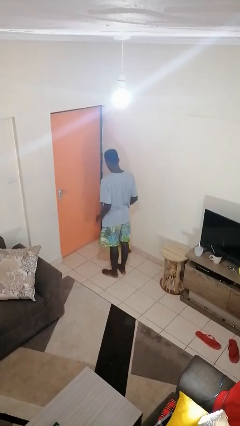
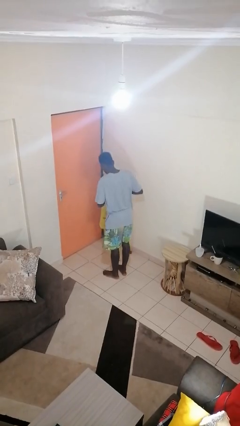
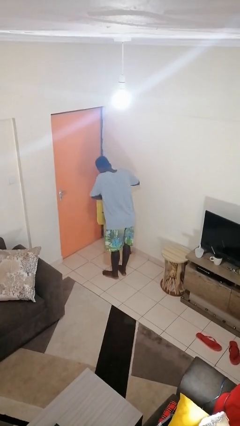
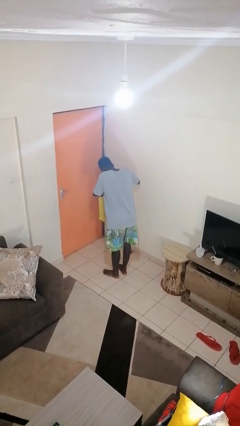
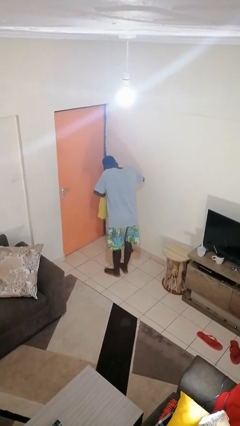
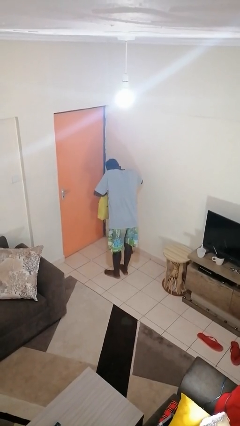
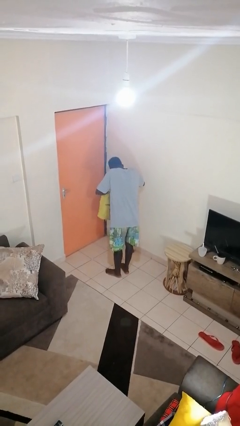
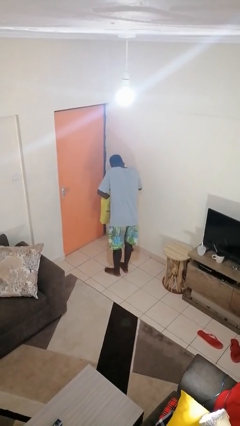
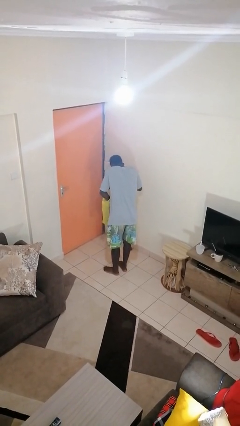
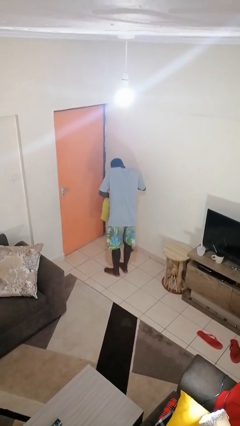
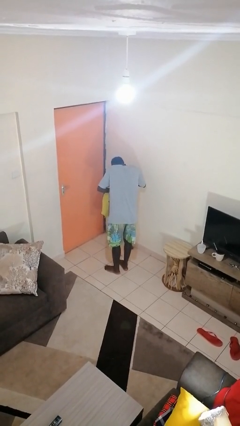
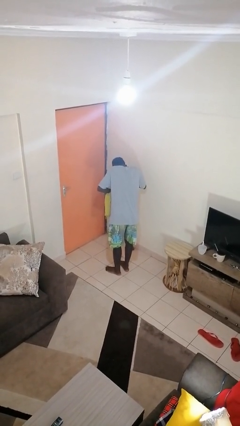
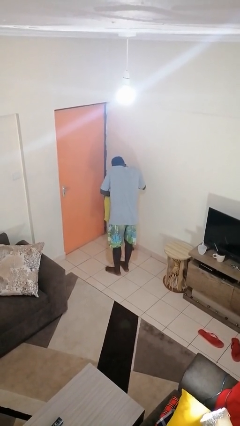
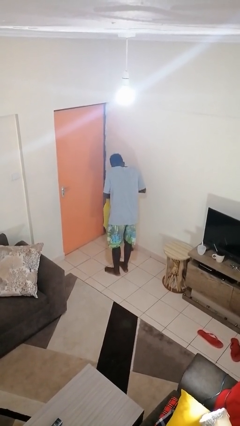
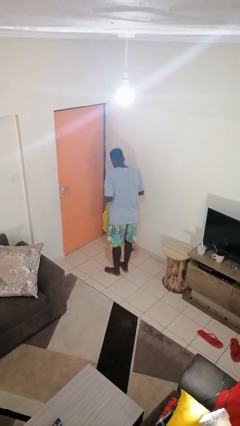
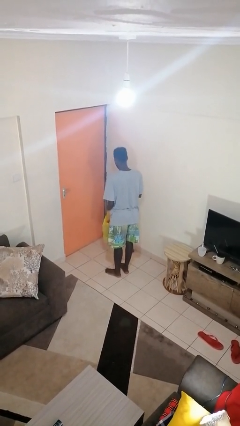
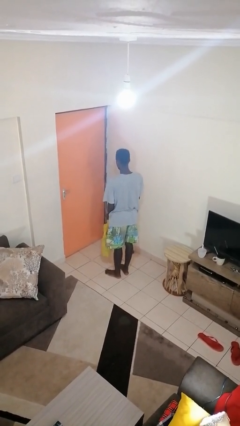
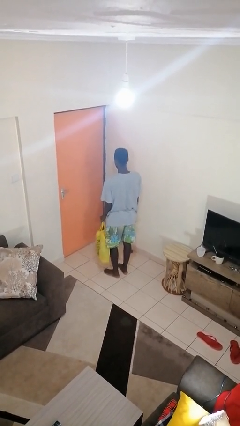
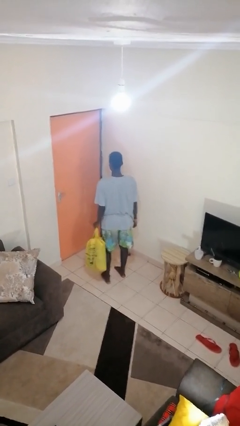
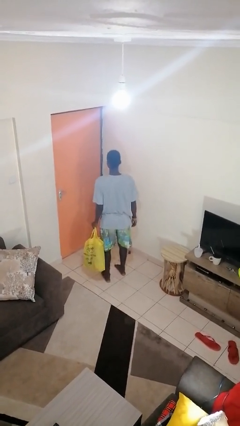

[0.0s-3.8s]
person searches in bag

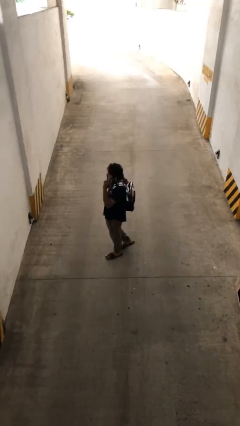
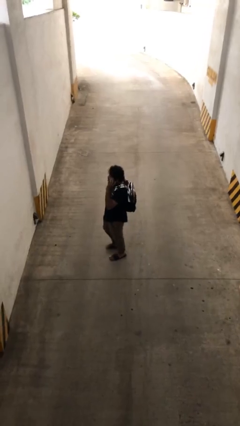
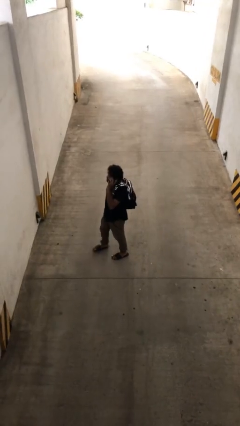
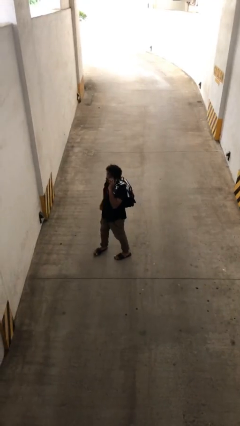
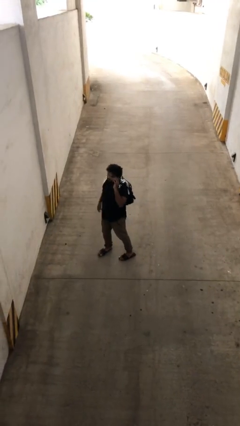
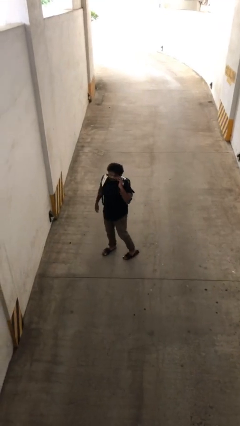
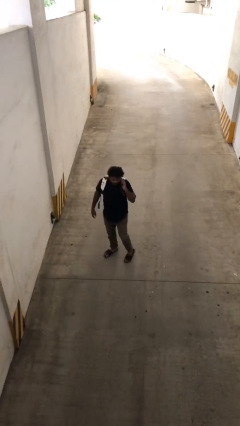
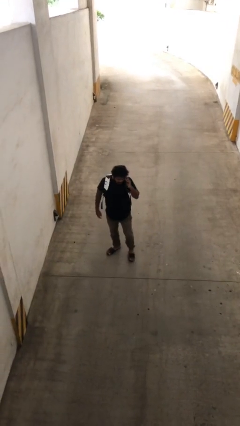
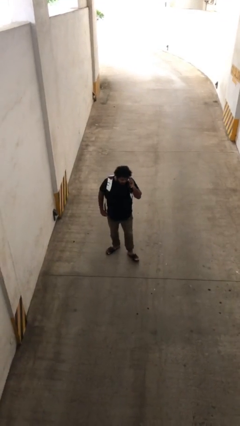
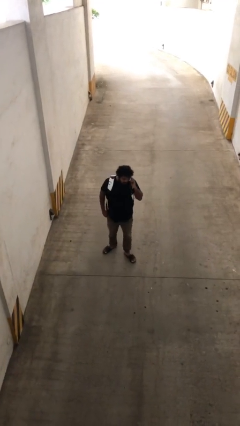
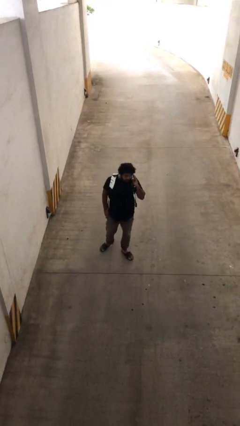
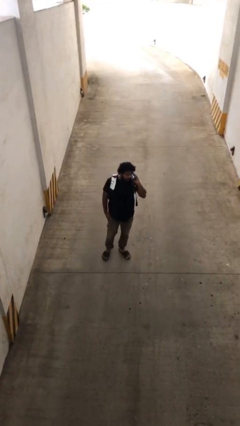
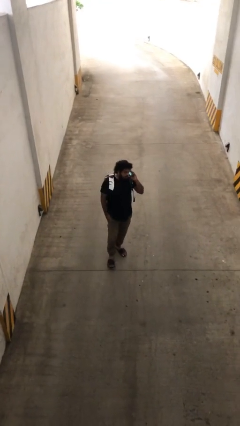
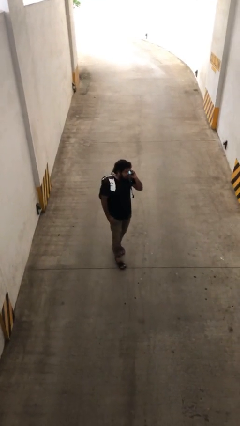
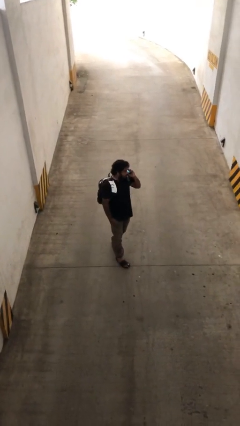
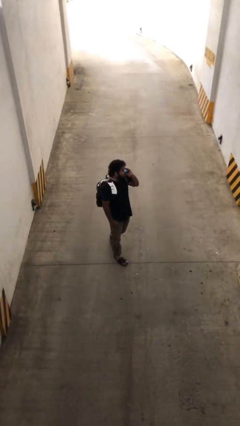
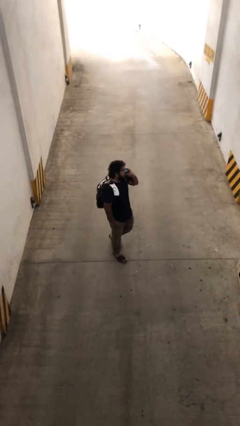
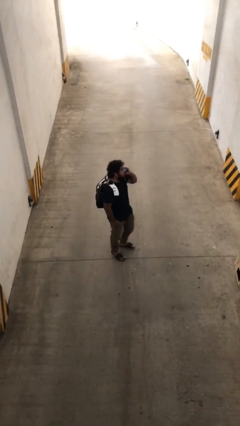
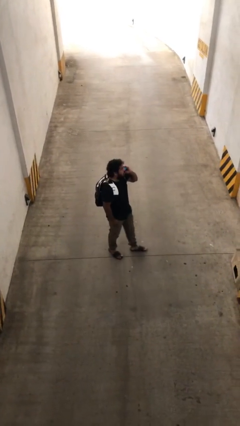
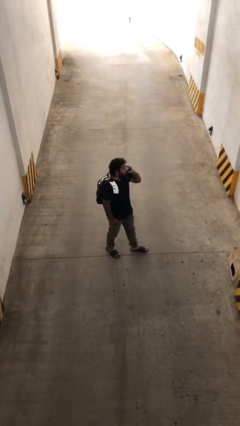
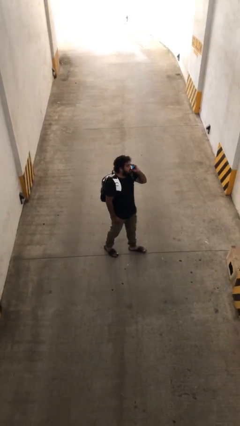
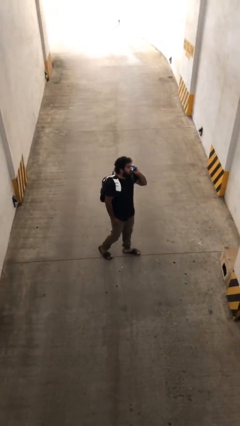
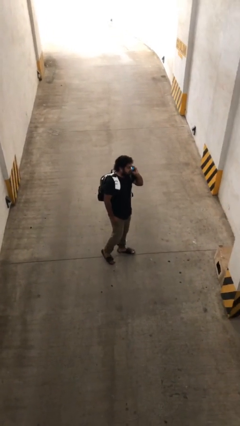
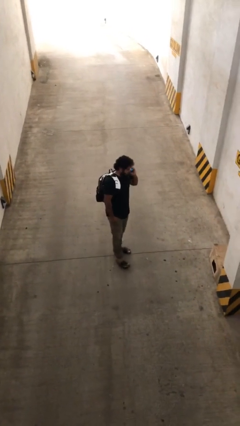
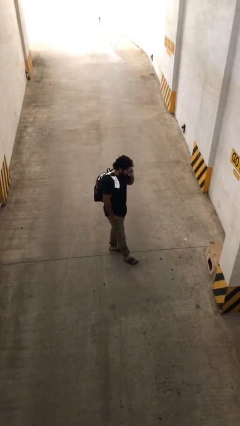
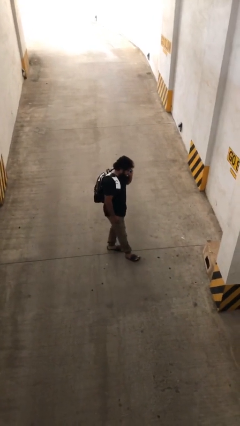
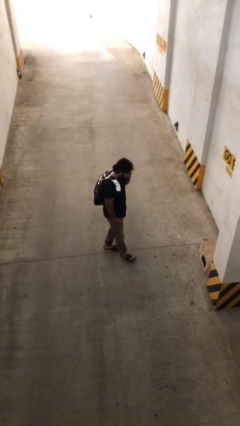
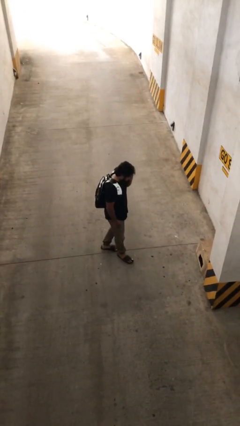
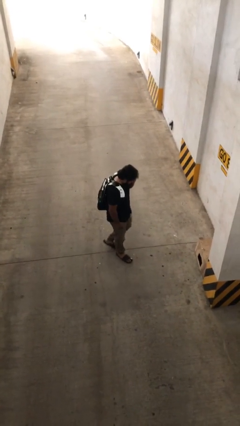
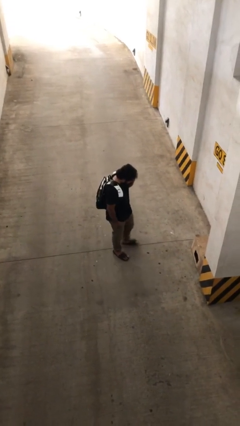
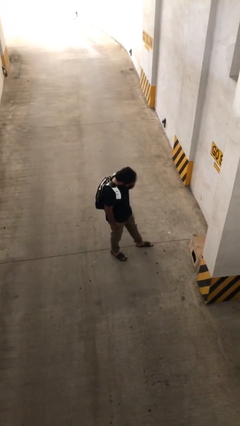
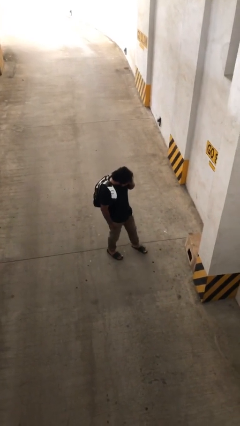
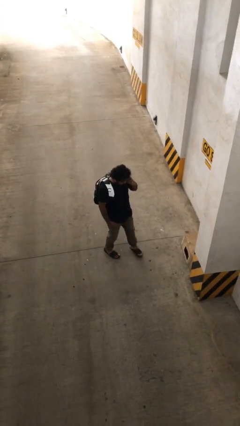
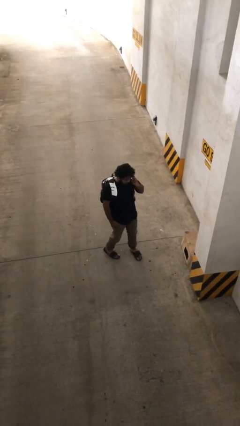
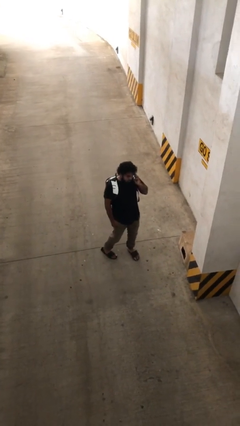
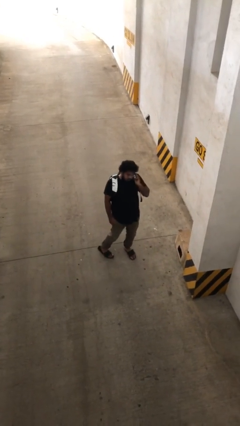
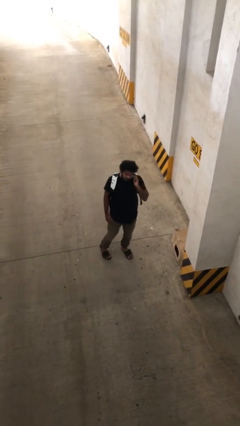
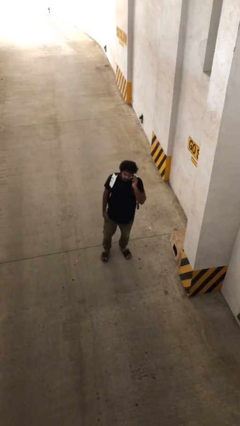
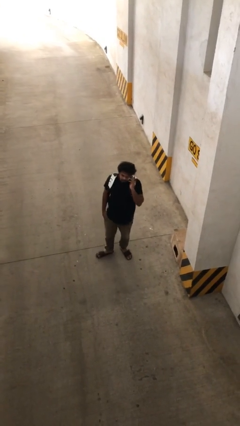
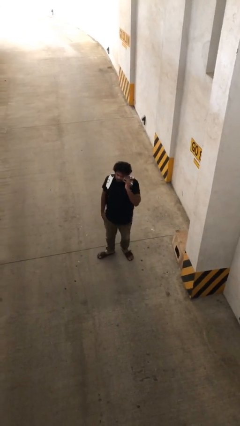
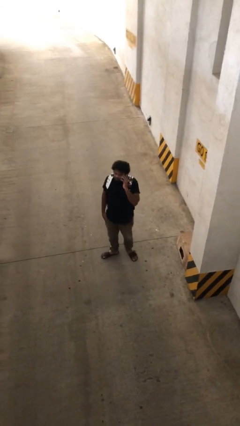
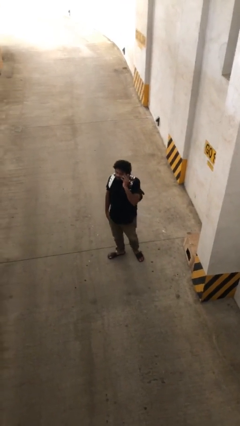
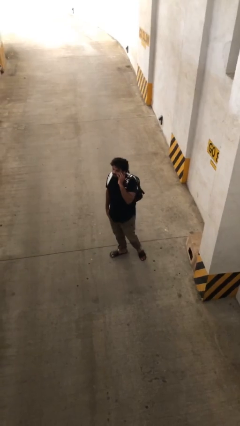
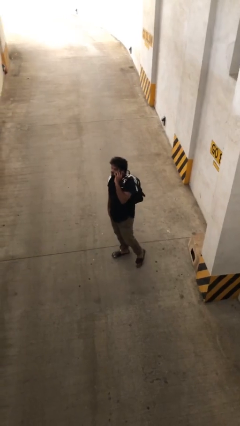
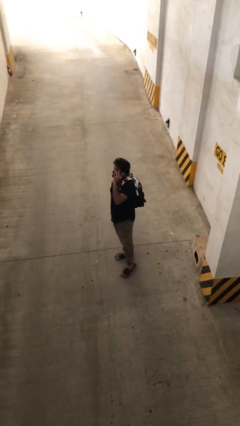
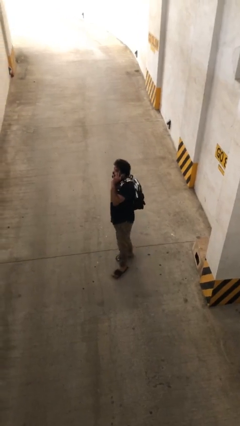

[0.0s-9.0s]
person talks on phone

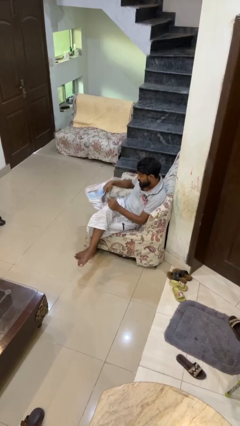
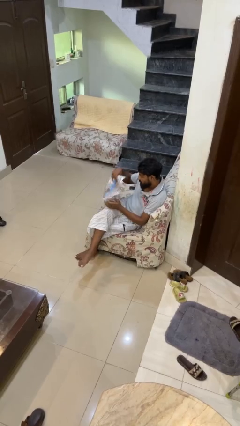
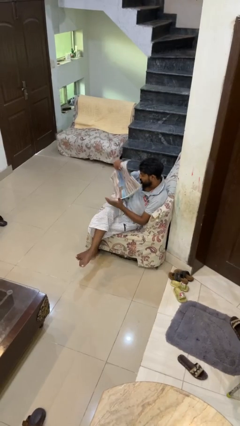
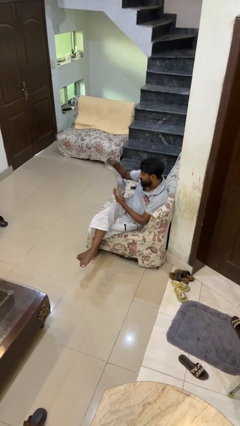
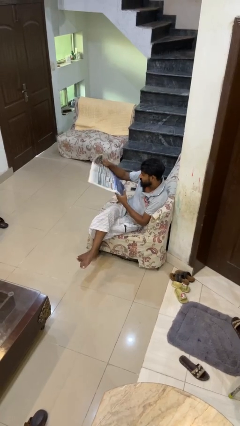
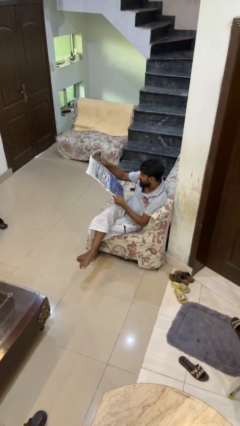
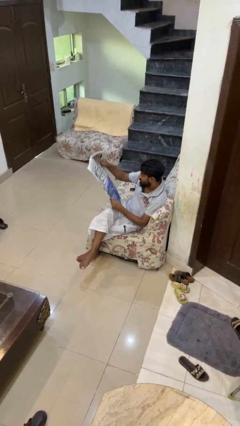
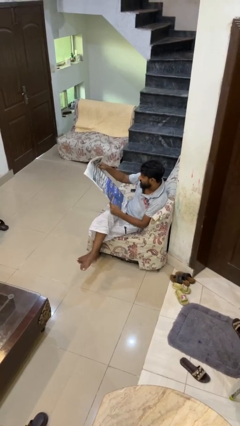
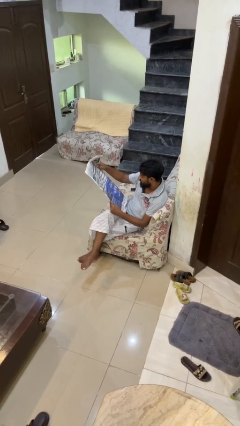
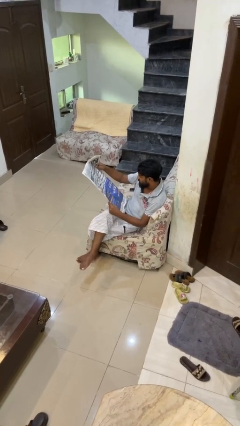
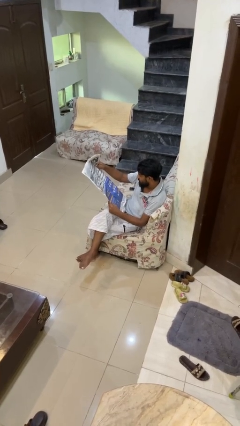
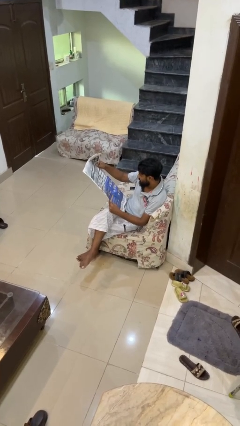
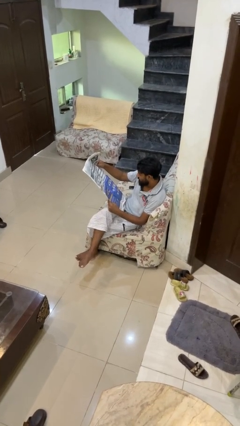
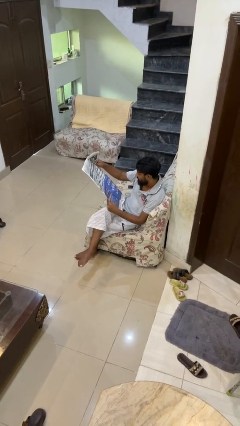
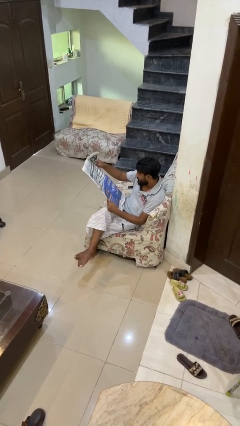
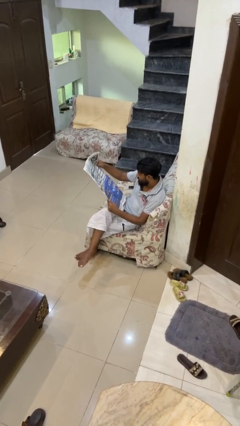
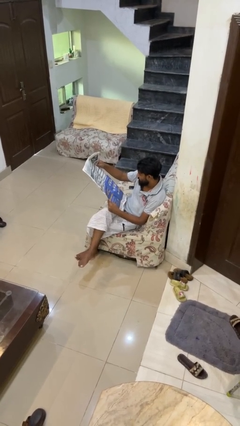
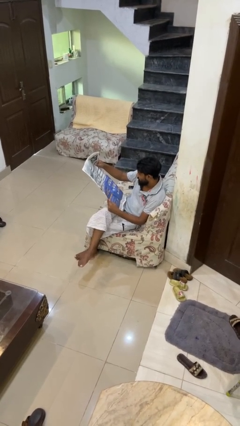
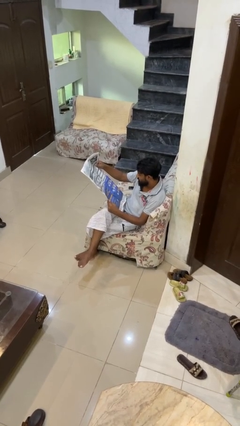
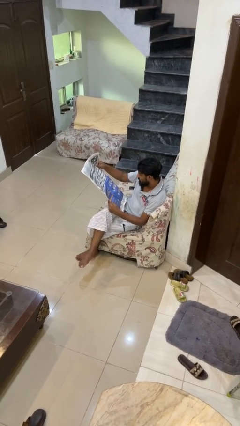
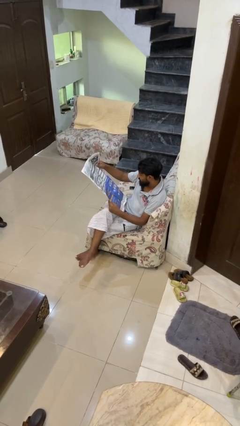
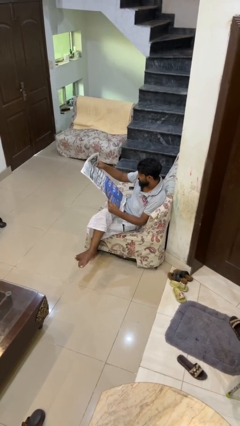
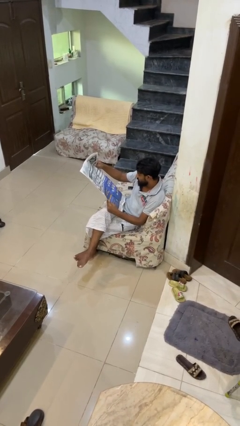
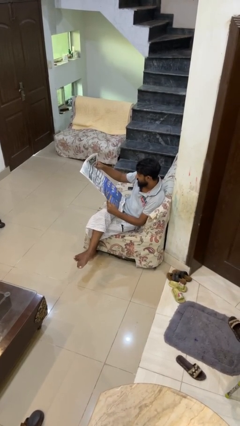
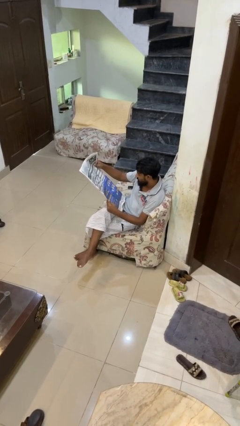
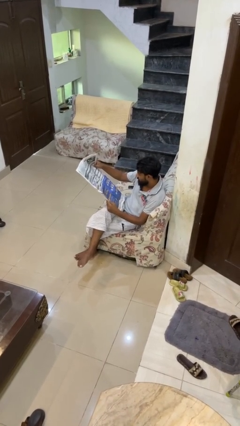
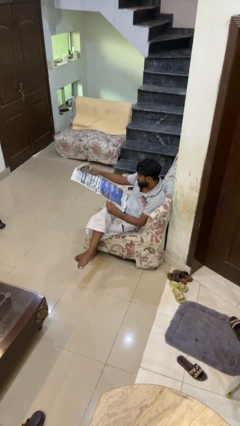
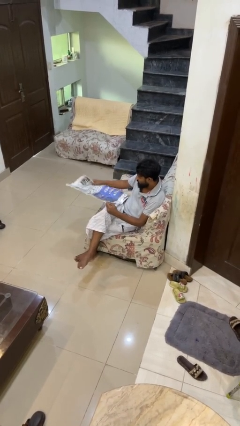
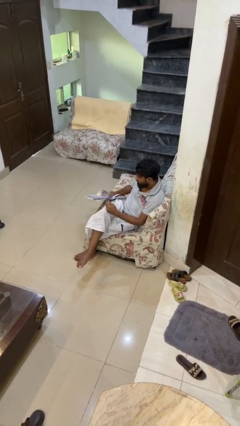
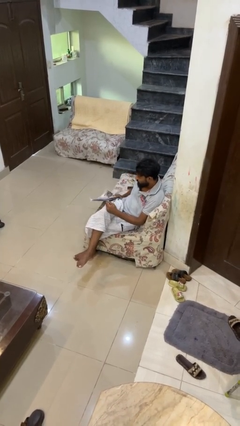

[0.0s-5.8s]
person reads newspaper
